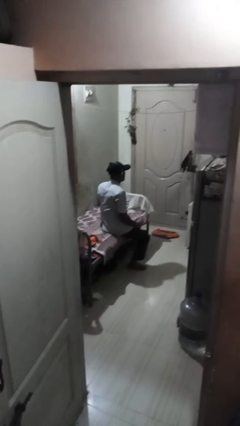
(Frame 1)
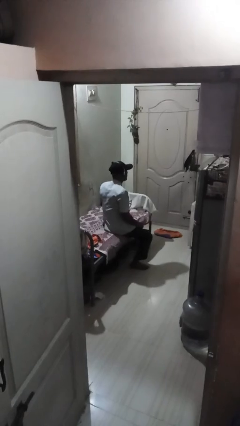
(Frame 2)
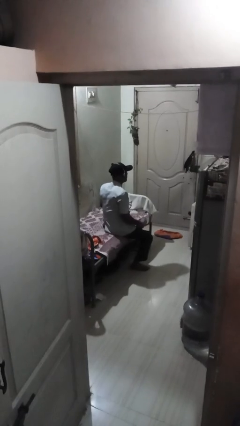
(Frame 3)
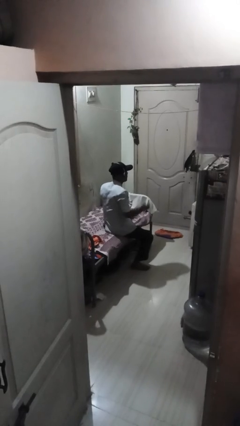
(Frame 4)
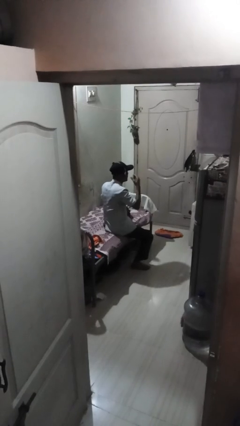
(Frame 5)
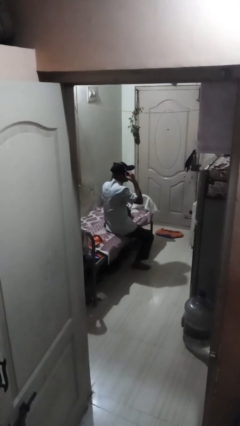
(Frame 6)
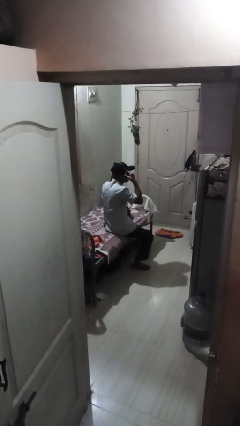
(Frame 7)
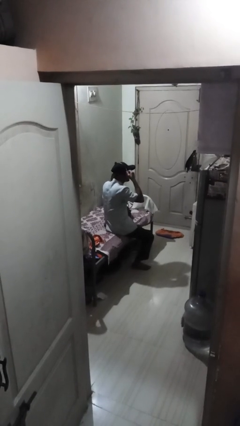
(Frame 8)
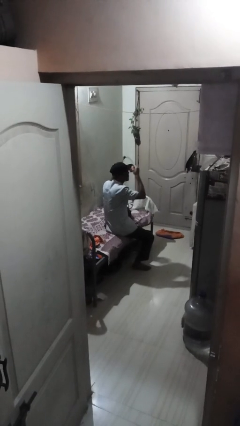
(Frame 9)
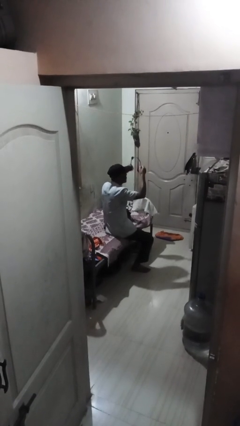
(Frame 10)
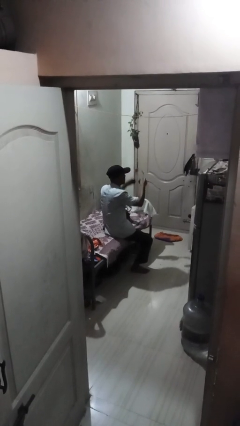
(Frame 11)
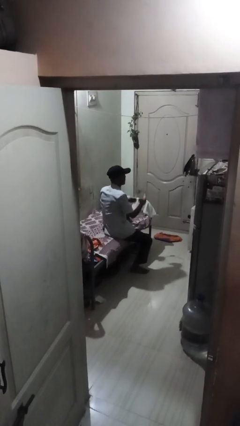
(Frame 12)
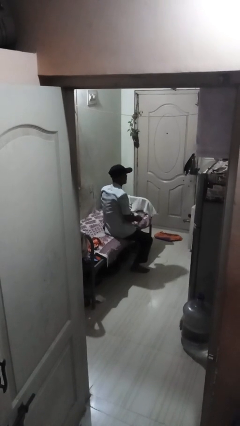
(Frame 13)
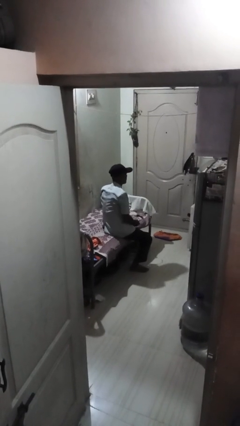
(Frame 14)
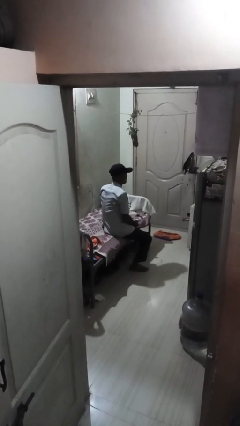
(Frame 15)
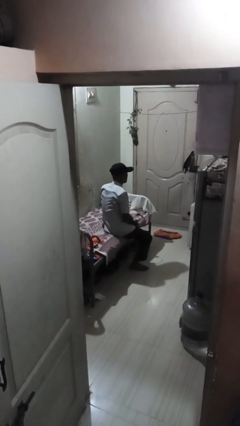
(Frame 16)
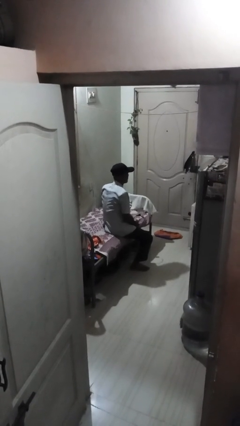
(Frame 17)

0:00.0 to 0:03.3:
person takes off headphones

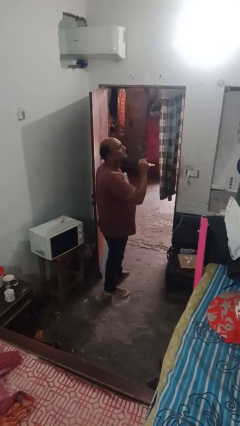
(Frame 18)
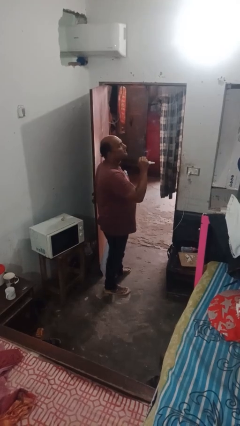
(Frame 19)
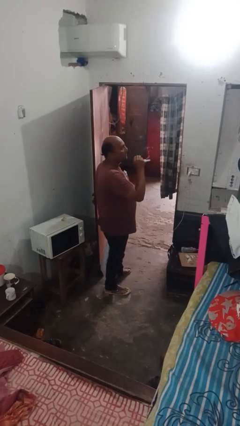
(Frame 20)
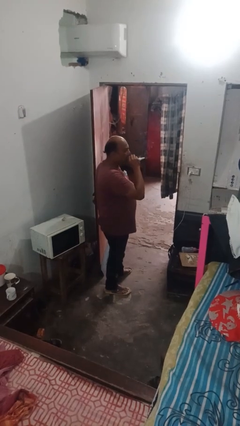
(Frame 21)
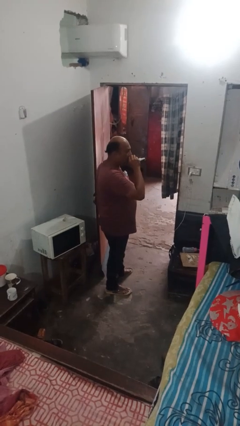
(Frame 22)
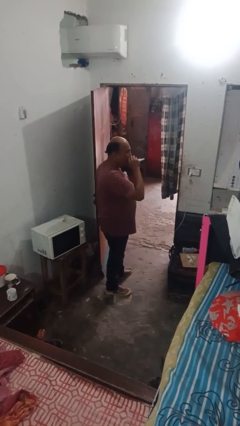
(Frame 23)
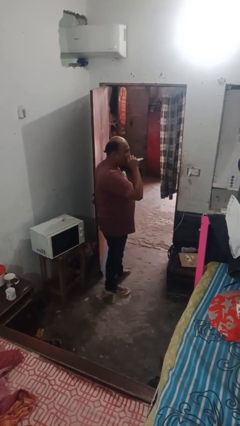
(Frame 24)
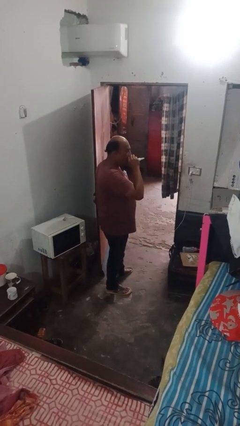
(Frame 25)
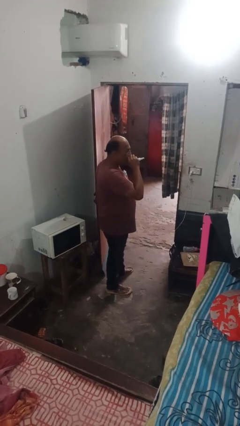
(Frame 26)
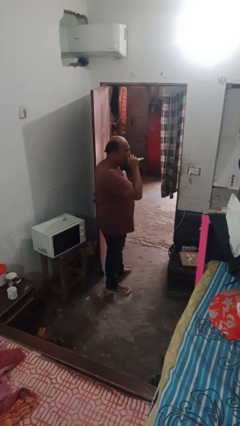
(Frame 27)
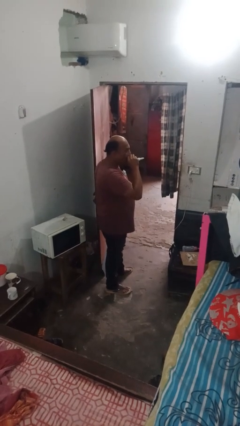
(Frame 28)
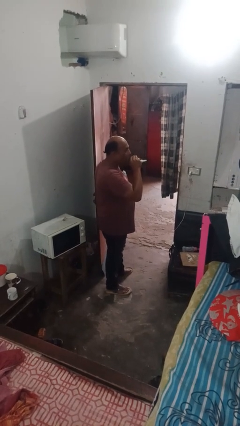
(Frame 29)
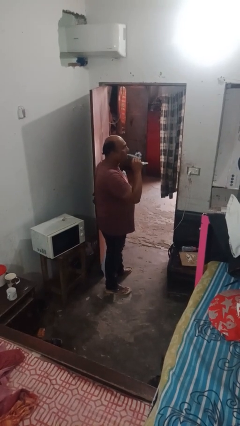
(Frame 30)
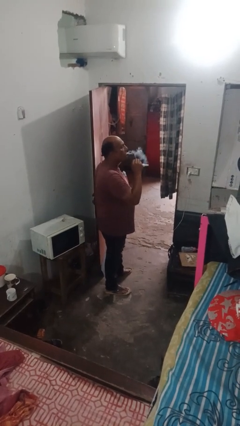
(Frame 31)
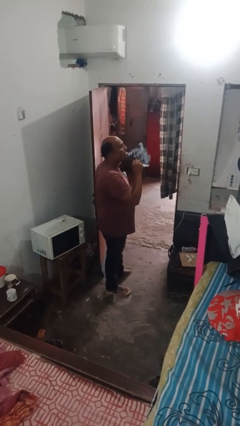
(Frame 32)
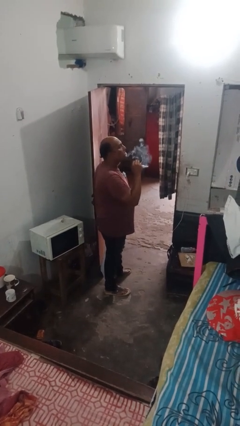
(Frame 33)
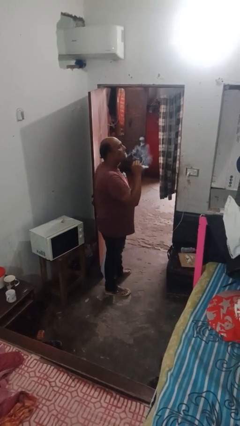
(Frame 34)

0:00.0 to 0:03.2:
person vapes

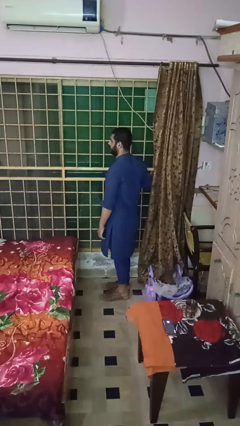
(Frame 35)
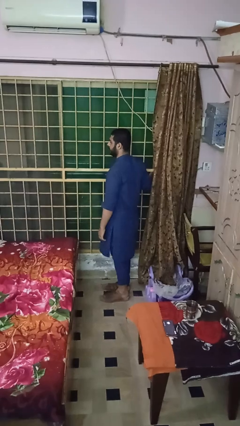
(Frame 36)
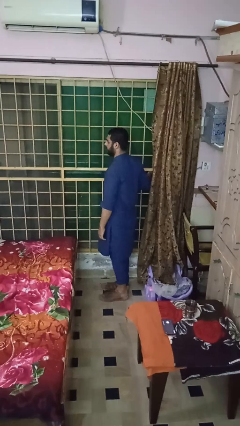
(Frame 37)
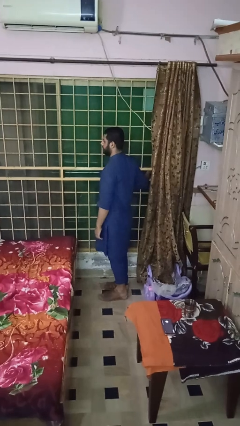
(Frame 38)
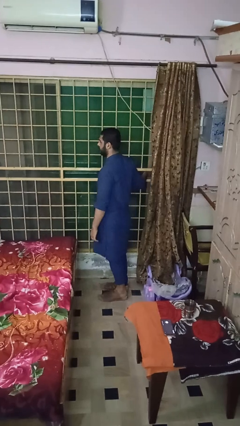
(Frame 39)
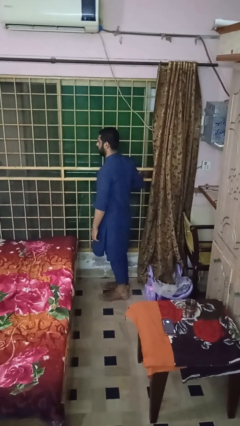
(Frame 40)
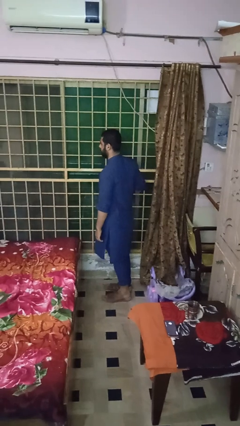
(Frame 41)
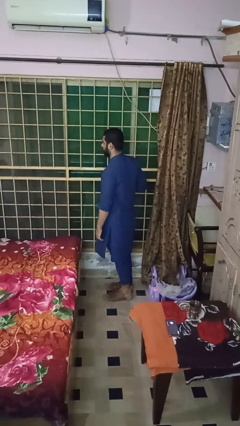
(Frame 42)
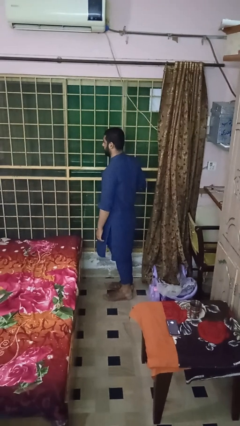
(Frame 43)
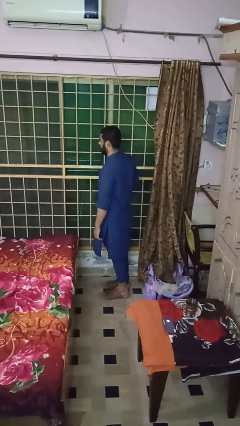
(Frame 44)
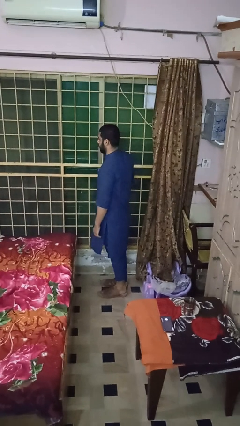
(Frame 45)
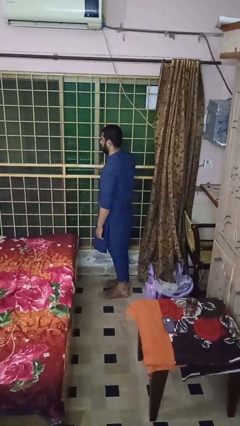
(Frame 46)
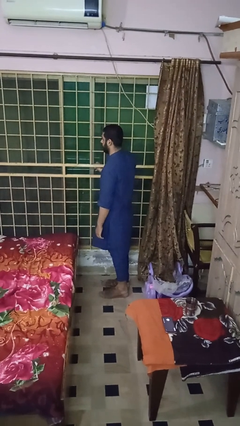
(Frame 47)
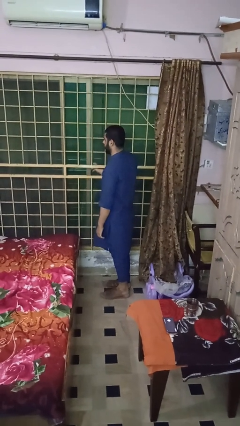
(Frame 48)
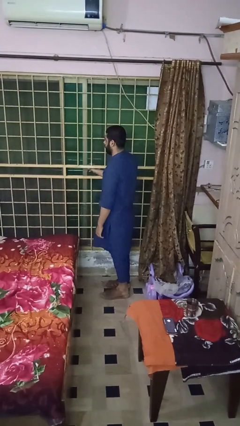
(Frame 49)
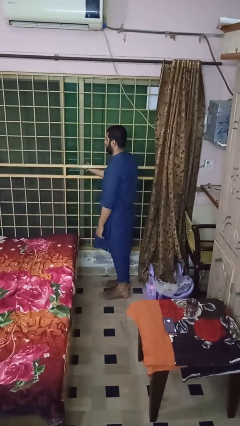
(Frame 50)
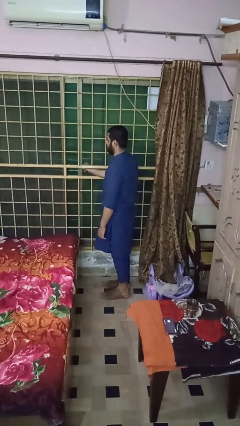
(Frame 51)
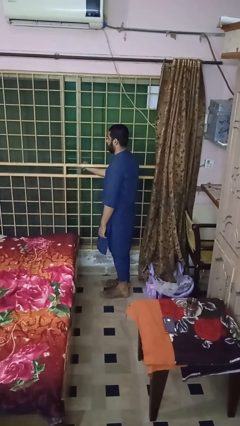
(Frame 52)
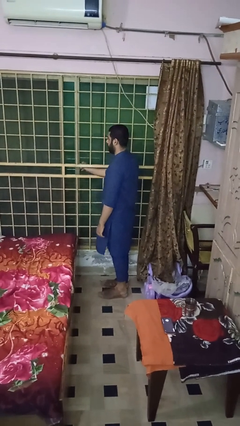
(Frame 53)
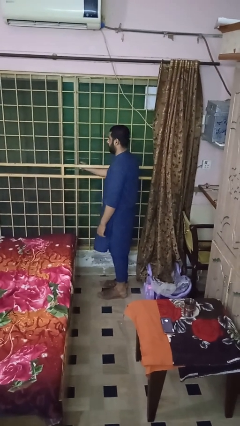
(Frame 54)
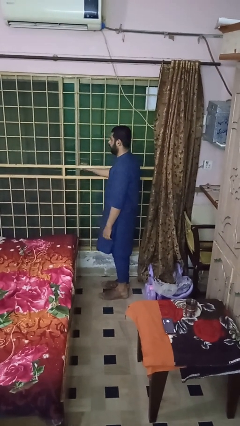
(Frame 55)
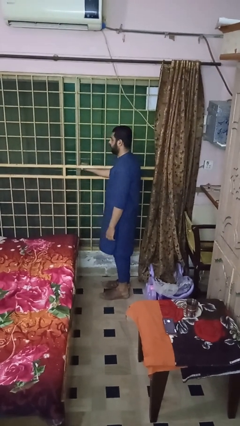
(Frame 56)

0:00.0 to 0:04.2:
person closes sliding door

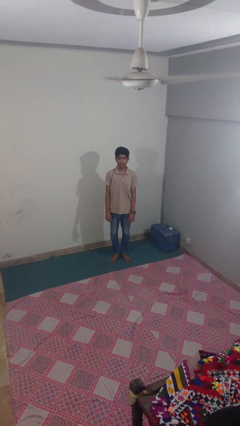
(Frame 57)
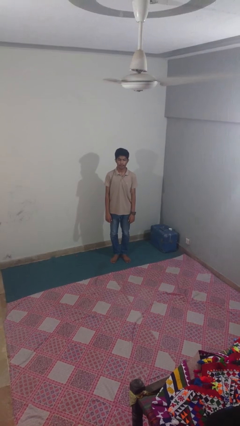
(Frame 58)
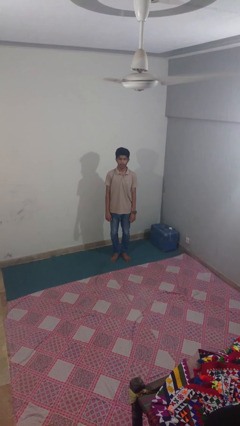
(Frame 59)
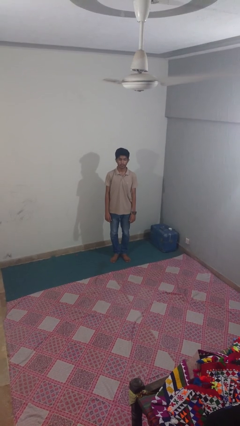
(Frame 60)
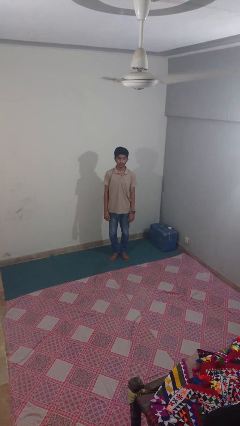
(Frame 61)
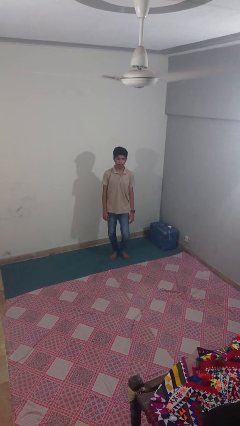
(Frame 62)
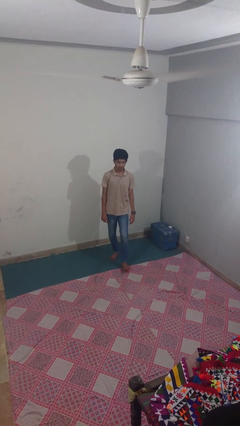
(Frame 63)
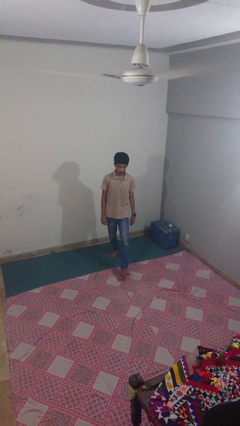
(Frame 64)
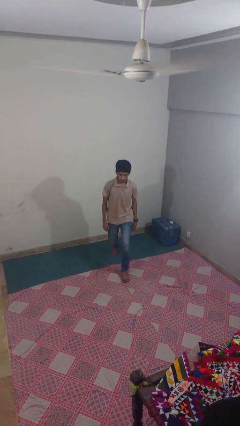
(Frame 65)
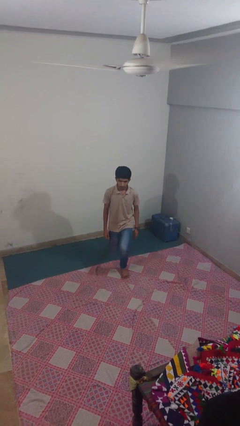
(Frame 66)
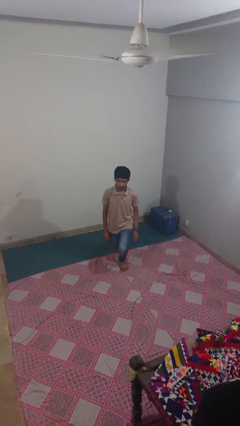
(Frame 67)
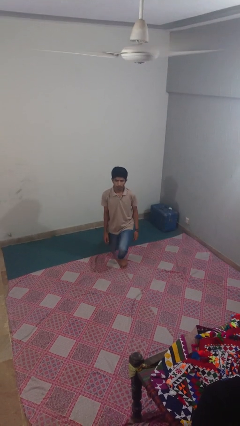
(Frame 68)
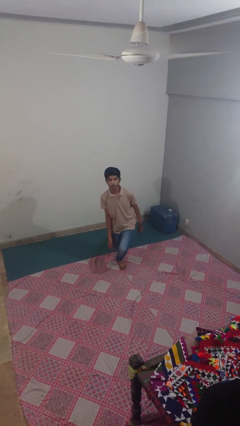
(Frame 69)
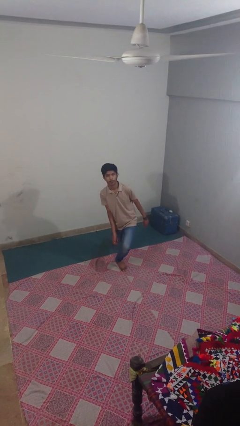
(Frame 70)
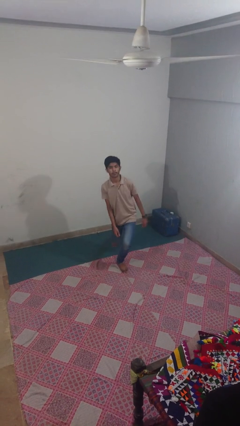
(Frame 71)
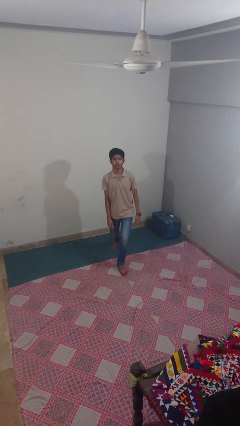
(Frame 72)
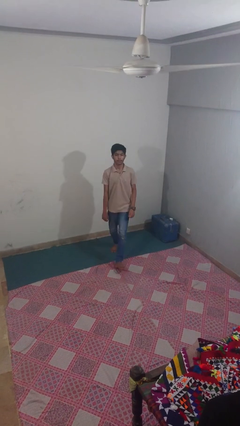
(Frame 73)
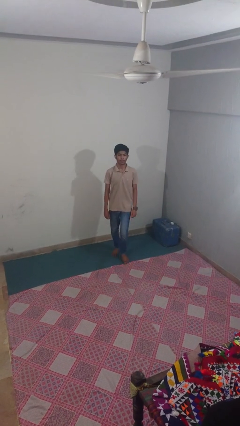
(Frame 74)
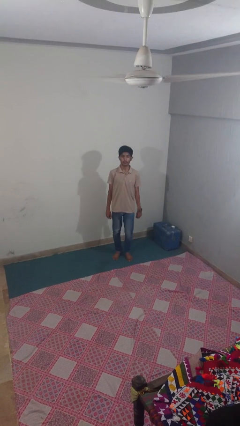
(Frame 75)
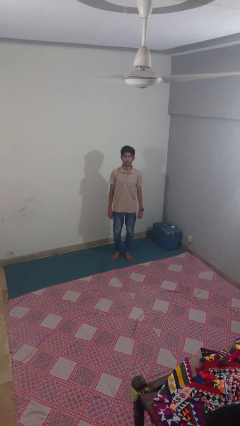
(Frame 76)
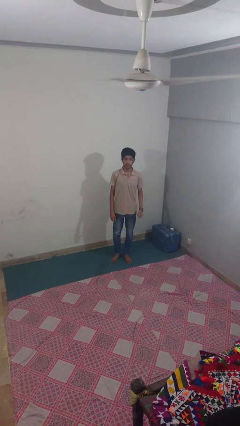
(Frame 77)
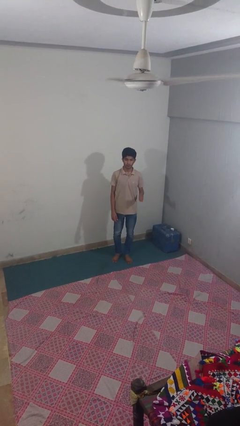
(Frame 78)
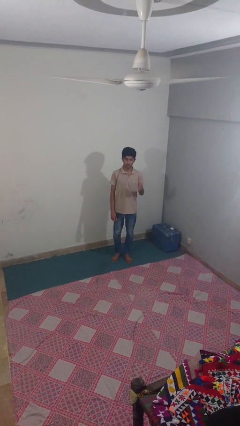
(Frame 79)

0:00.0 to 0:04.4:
person exercises with lunges

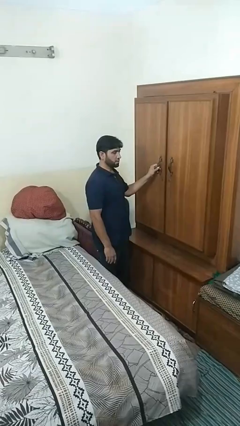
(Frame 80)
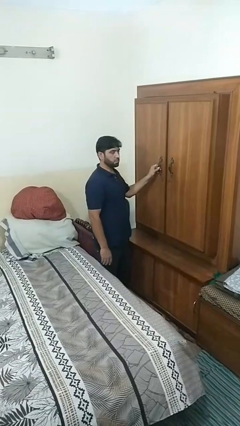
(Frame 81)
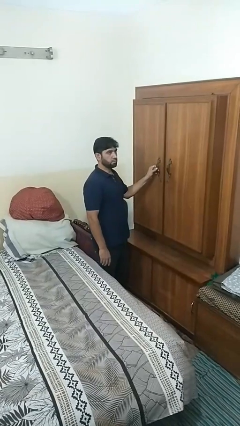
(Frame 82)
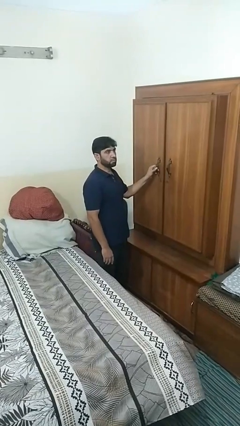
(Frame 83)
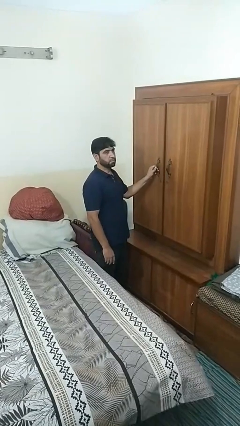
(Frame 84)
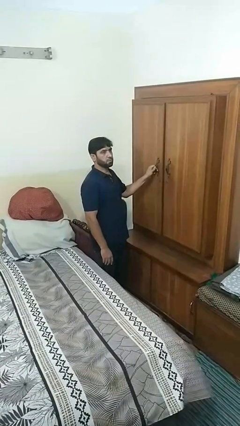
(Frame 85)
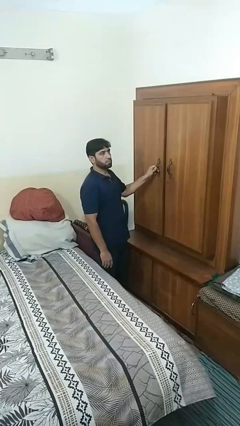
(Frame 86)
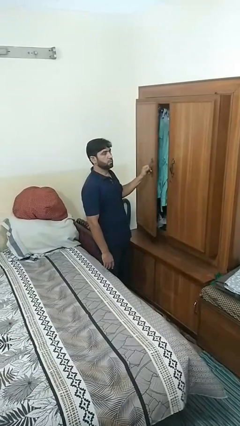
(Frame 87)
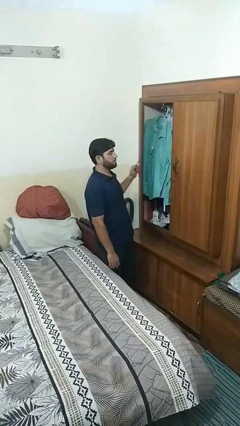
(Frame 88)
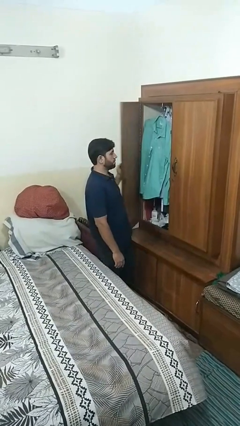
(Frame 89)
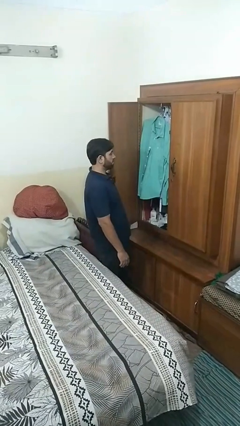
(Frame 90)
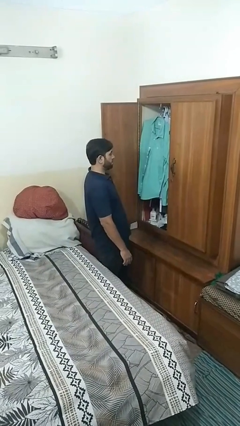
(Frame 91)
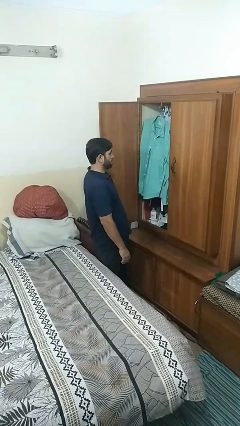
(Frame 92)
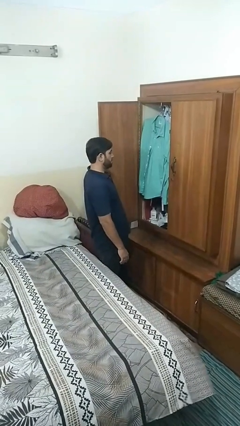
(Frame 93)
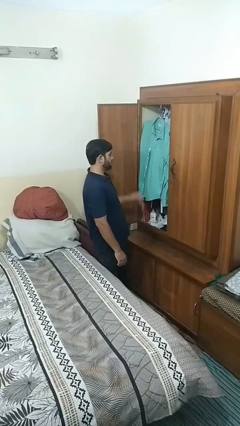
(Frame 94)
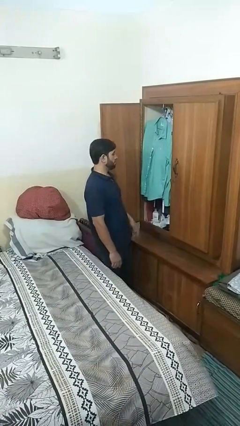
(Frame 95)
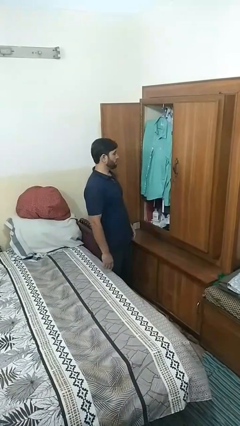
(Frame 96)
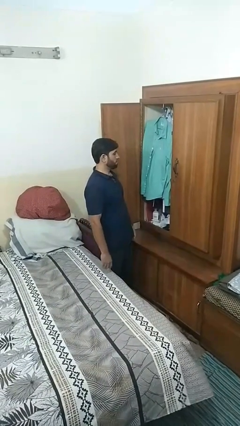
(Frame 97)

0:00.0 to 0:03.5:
person opens closet door
